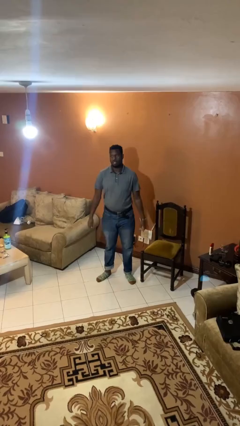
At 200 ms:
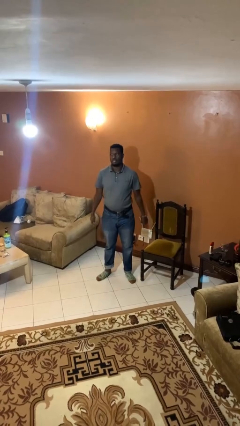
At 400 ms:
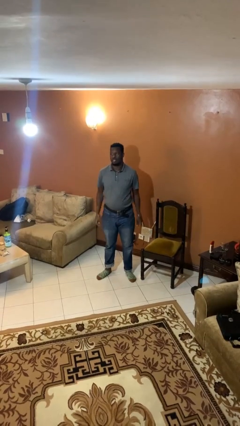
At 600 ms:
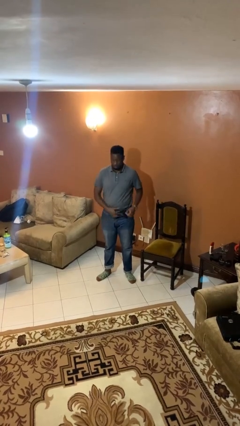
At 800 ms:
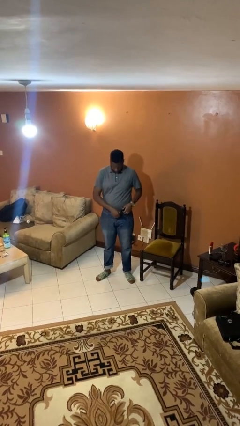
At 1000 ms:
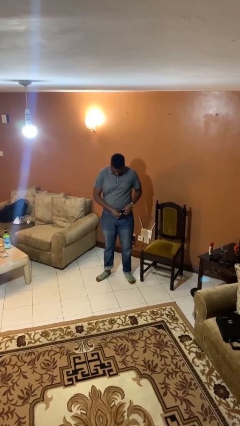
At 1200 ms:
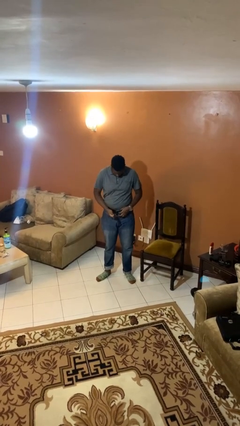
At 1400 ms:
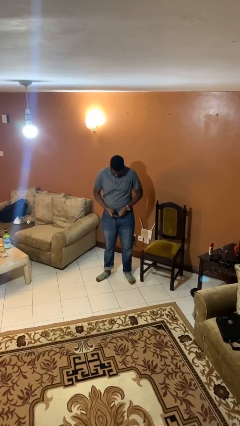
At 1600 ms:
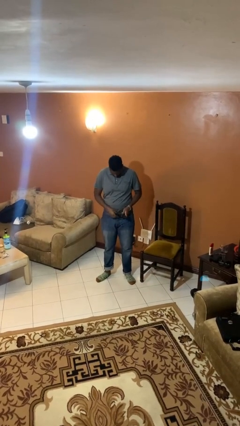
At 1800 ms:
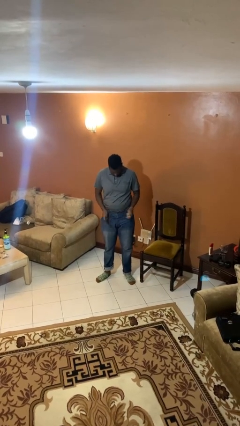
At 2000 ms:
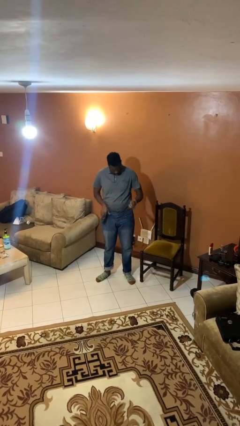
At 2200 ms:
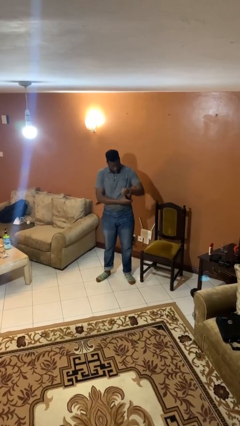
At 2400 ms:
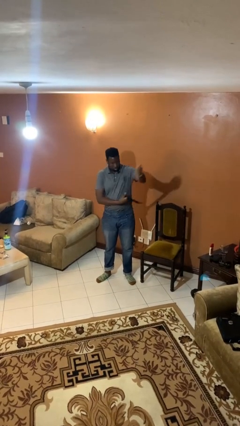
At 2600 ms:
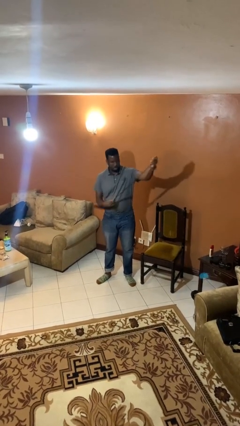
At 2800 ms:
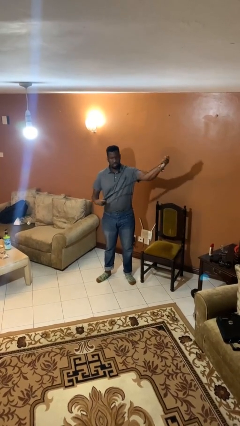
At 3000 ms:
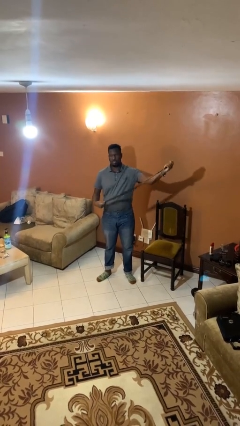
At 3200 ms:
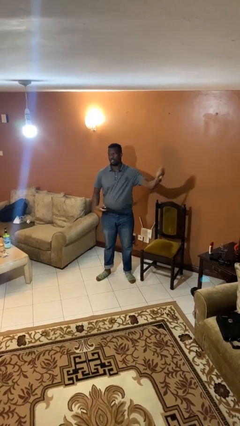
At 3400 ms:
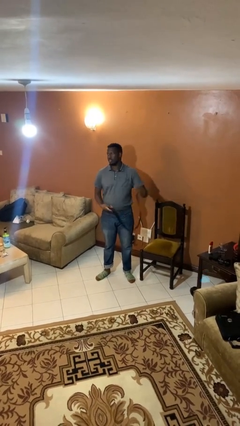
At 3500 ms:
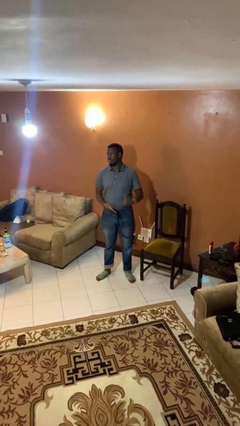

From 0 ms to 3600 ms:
person takes off belt

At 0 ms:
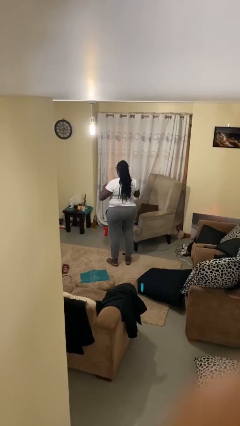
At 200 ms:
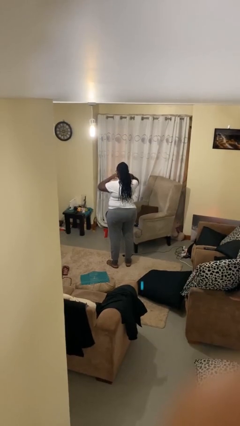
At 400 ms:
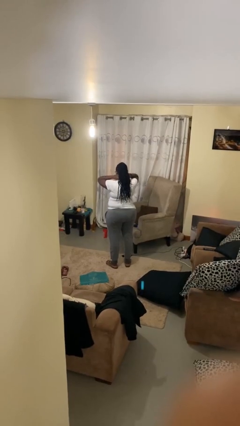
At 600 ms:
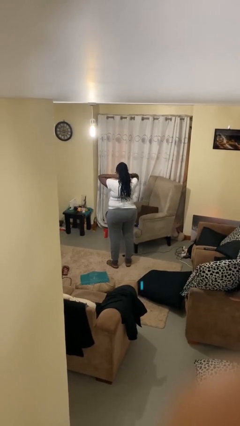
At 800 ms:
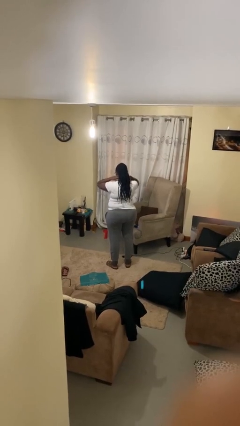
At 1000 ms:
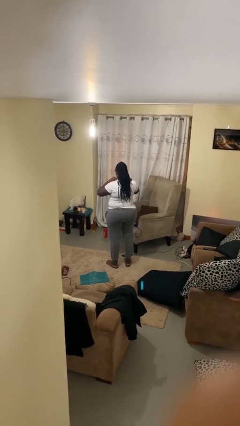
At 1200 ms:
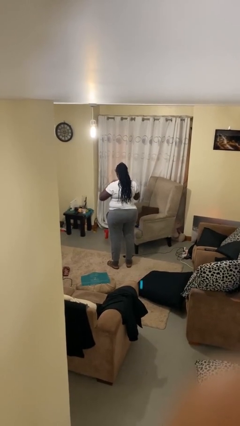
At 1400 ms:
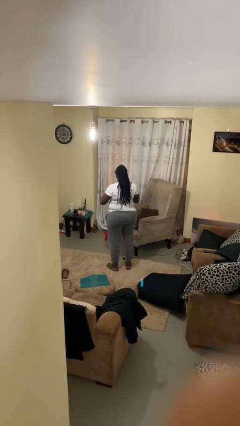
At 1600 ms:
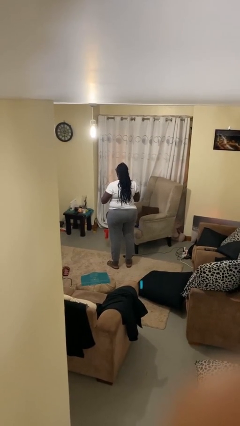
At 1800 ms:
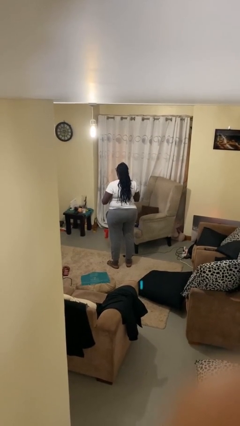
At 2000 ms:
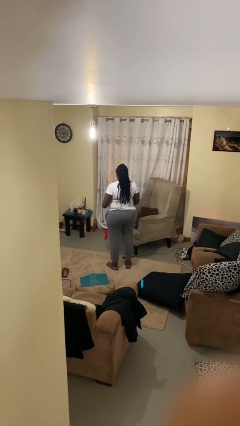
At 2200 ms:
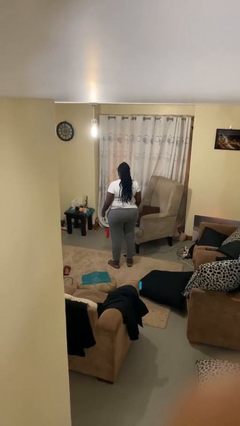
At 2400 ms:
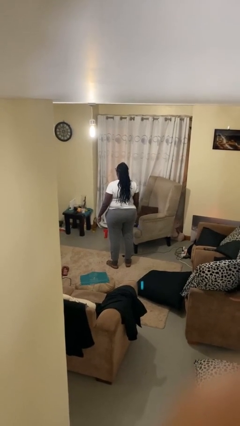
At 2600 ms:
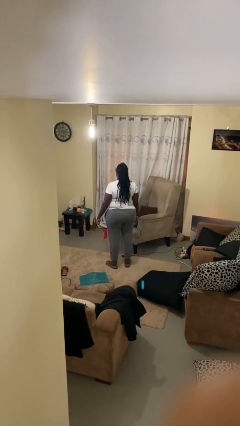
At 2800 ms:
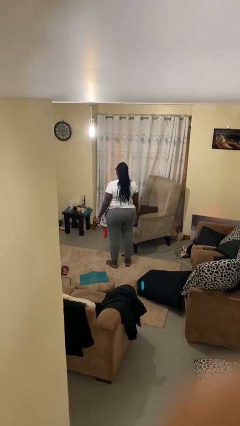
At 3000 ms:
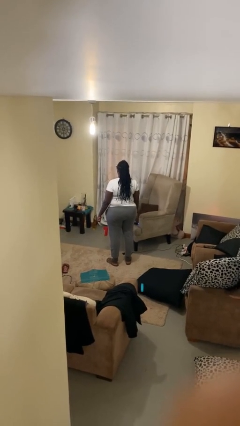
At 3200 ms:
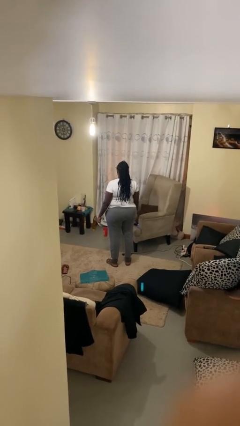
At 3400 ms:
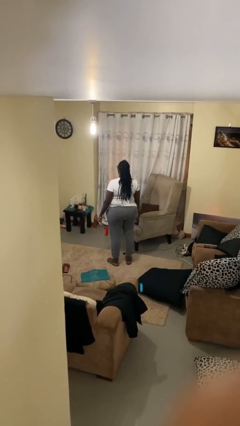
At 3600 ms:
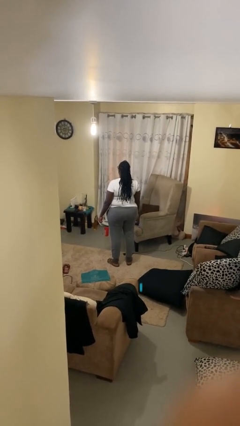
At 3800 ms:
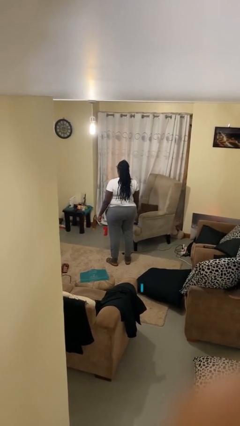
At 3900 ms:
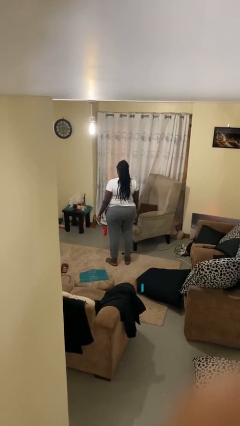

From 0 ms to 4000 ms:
person takes off necklace

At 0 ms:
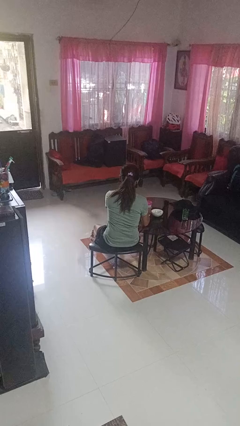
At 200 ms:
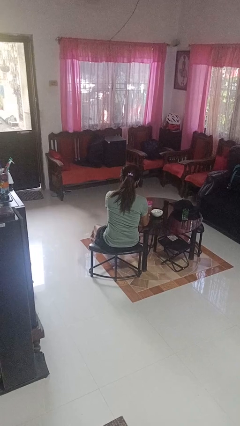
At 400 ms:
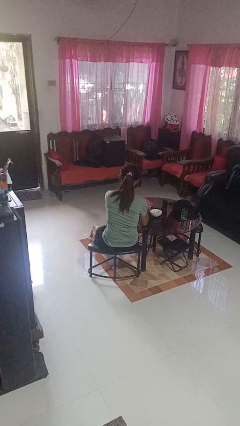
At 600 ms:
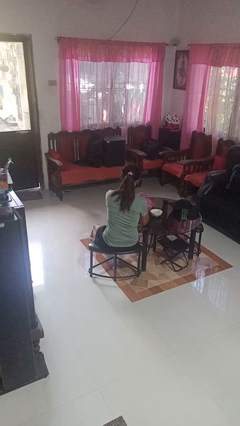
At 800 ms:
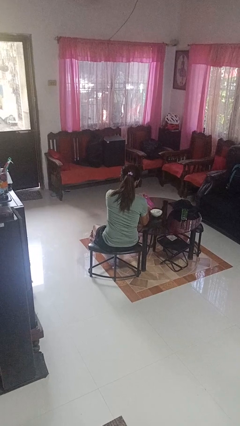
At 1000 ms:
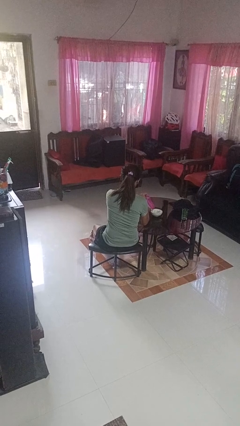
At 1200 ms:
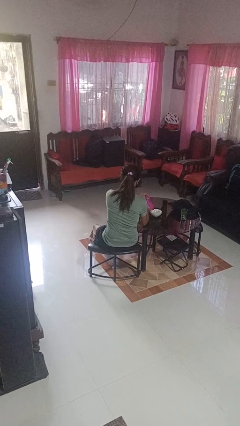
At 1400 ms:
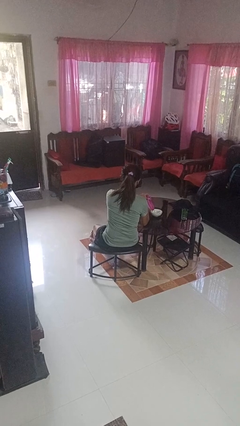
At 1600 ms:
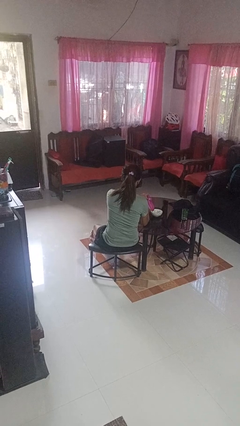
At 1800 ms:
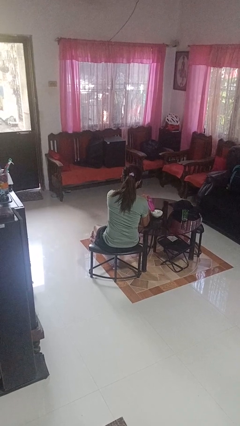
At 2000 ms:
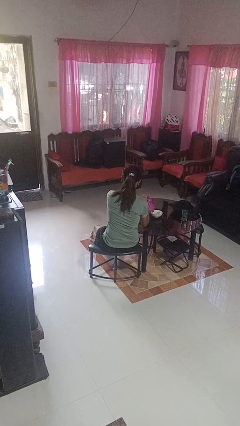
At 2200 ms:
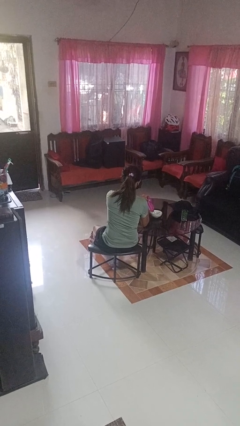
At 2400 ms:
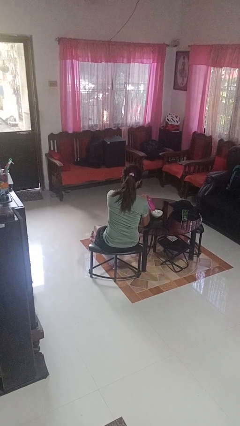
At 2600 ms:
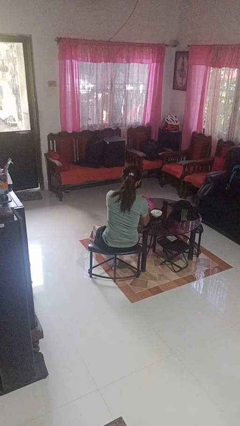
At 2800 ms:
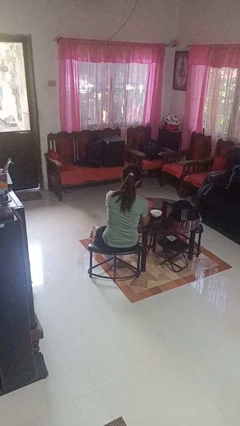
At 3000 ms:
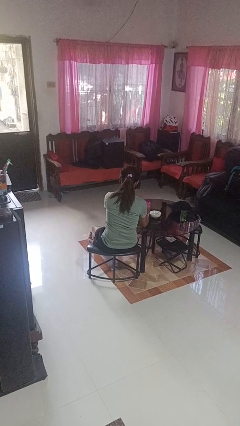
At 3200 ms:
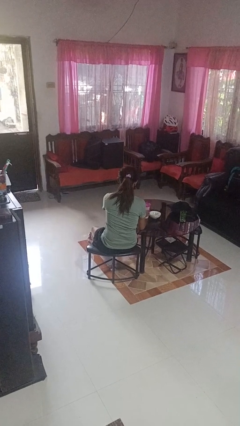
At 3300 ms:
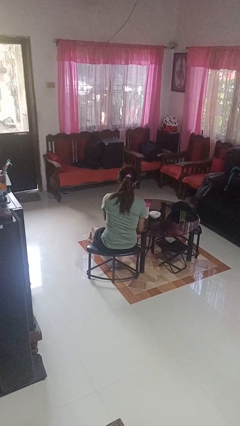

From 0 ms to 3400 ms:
person pours into bowl

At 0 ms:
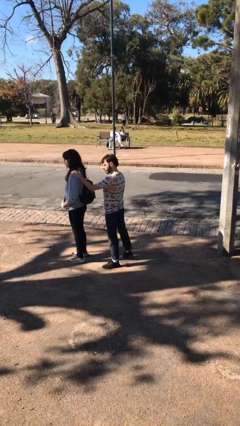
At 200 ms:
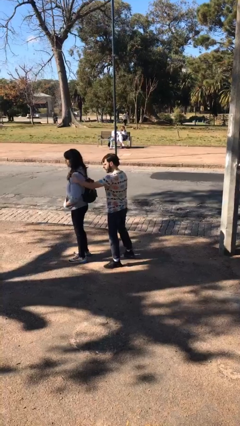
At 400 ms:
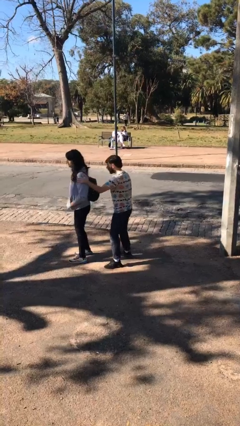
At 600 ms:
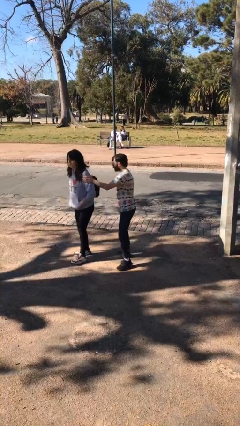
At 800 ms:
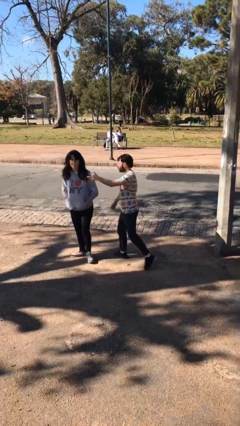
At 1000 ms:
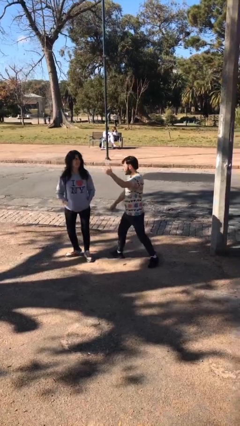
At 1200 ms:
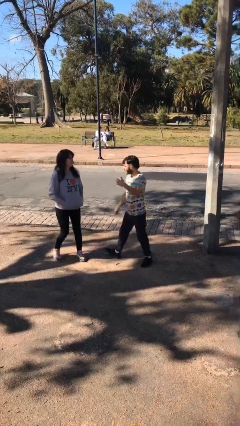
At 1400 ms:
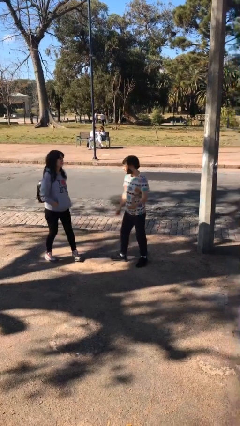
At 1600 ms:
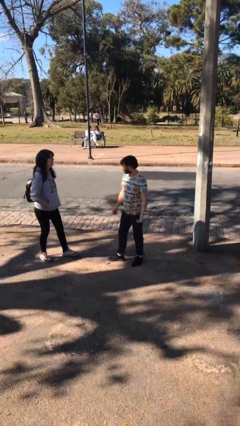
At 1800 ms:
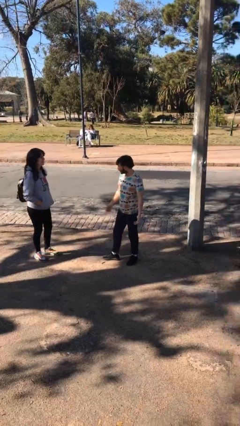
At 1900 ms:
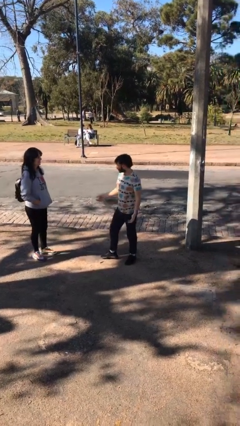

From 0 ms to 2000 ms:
person spins person around

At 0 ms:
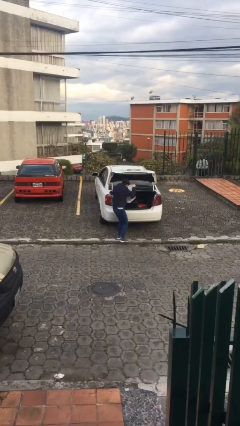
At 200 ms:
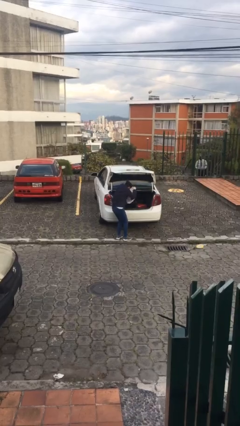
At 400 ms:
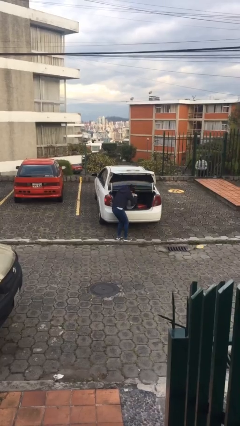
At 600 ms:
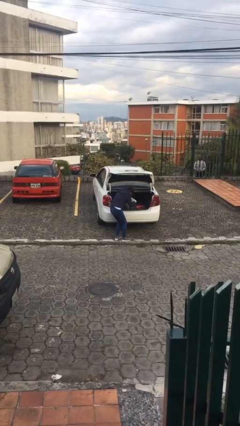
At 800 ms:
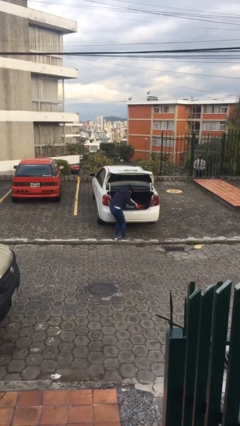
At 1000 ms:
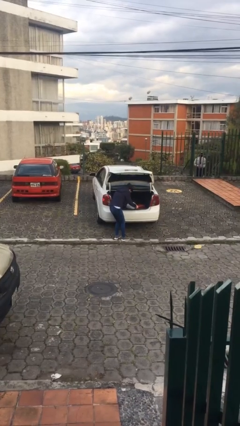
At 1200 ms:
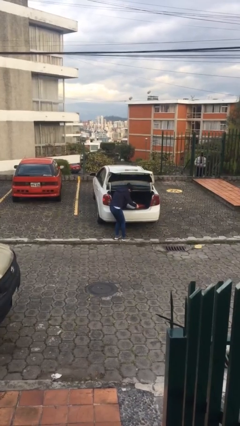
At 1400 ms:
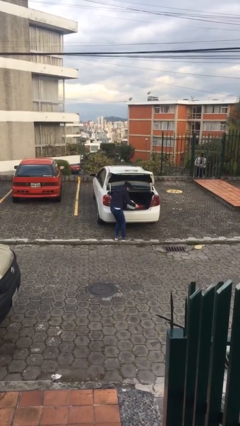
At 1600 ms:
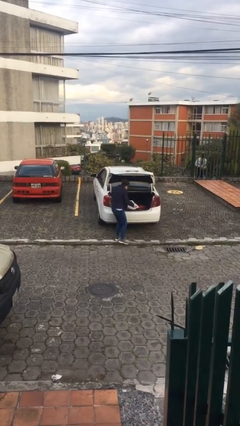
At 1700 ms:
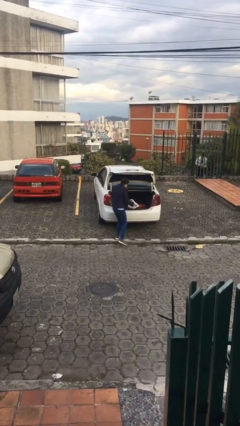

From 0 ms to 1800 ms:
person loads car

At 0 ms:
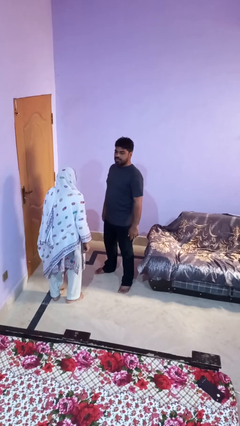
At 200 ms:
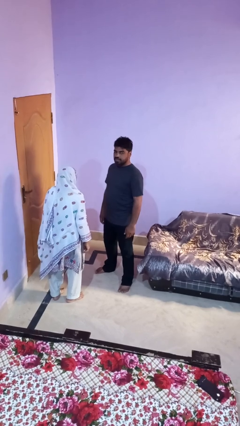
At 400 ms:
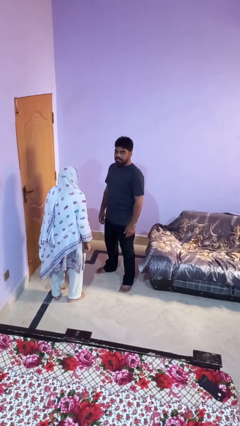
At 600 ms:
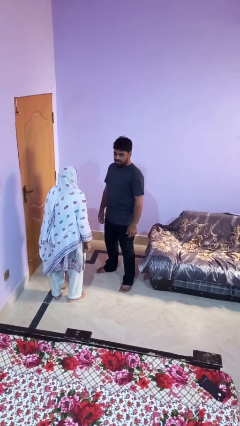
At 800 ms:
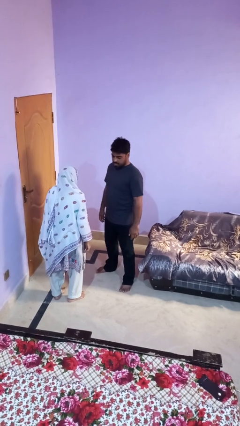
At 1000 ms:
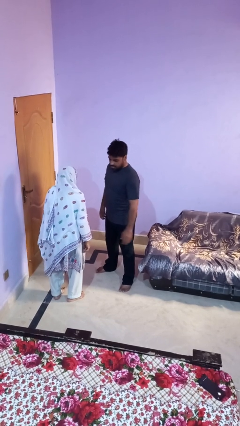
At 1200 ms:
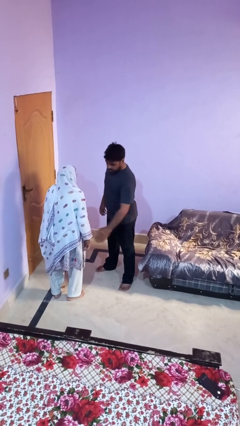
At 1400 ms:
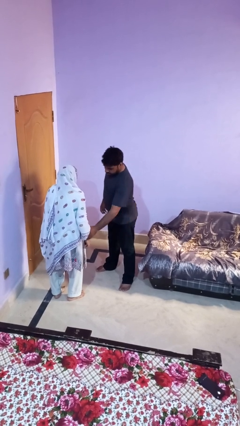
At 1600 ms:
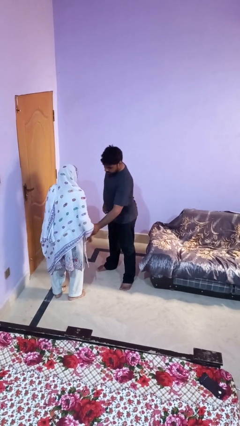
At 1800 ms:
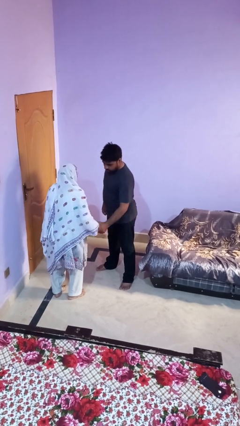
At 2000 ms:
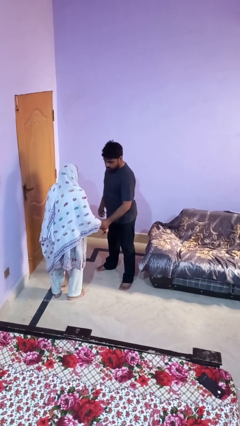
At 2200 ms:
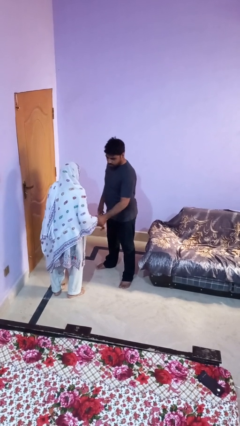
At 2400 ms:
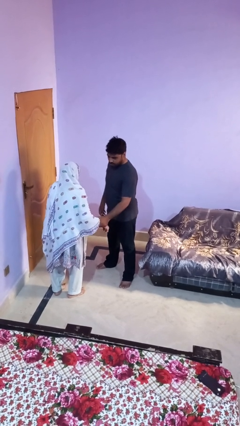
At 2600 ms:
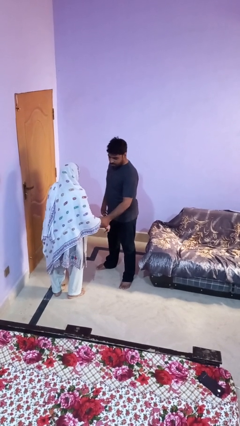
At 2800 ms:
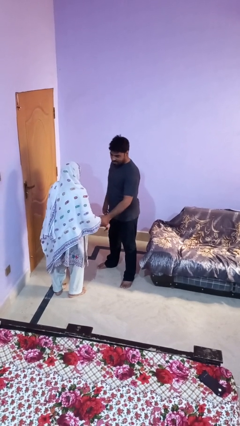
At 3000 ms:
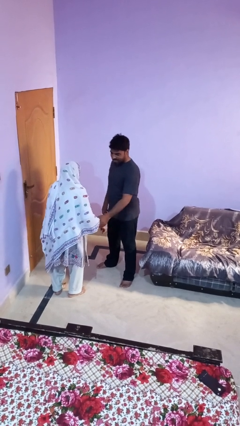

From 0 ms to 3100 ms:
person grabs person by forearm
